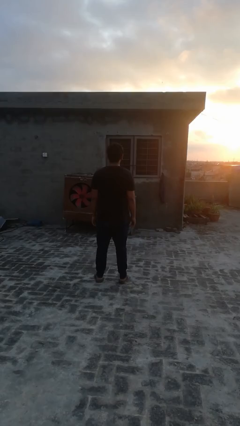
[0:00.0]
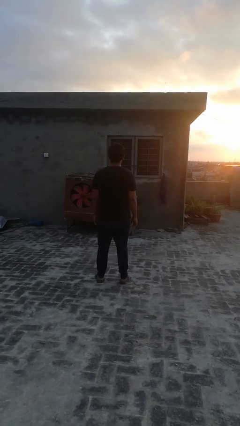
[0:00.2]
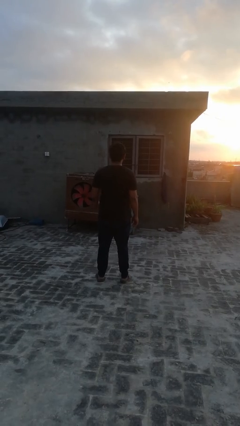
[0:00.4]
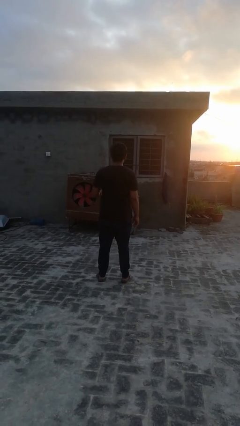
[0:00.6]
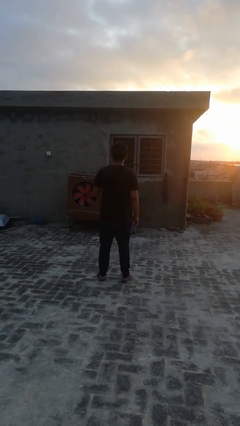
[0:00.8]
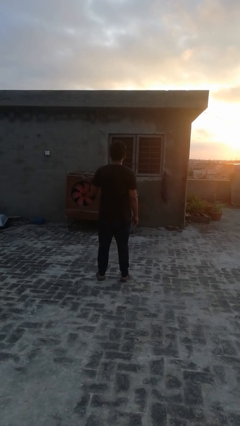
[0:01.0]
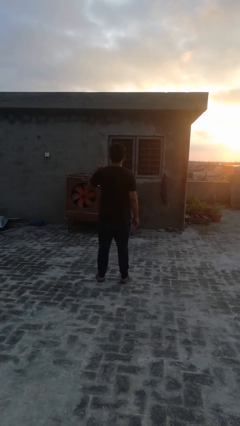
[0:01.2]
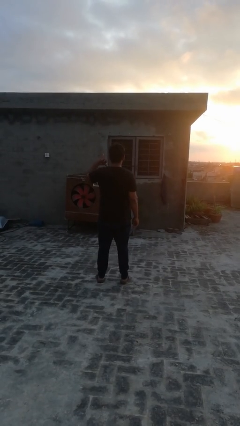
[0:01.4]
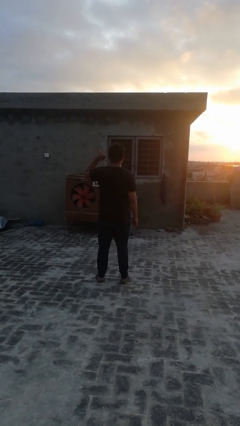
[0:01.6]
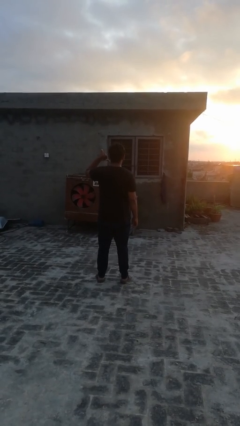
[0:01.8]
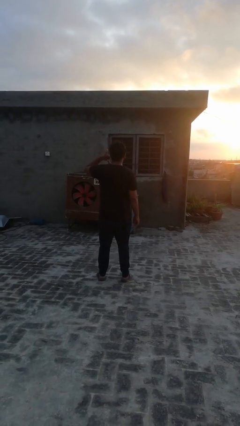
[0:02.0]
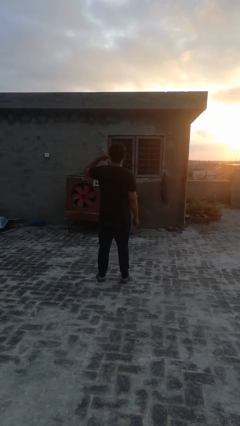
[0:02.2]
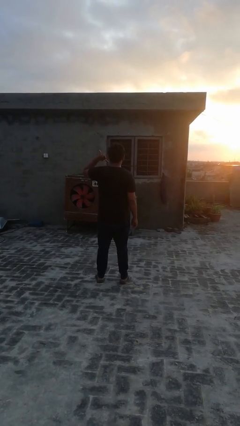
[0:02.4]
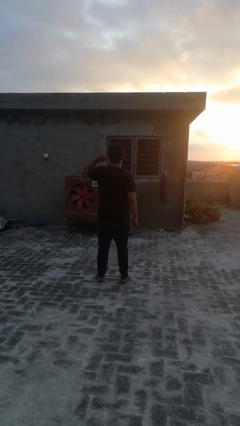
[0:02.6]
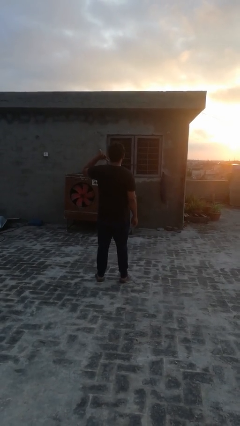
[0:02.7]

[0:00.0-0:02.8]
person gestures hang loose

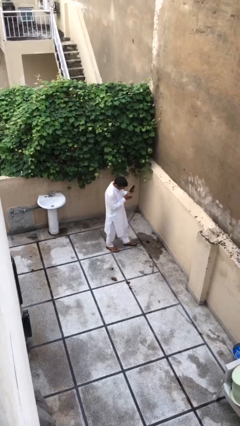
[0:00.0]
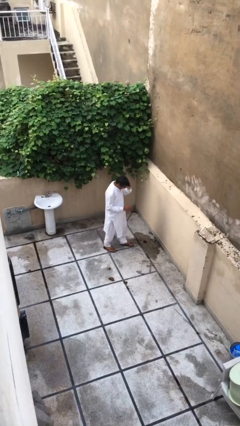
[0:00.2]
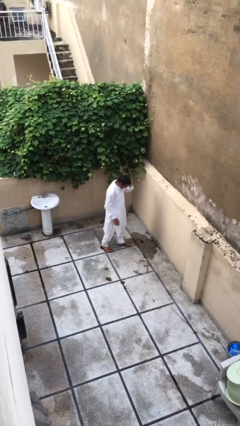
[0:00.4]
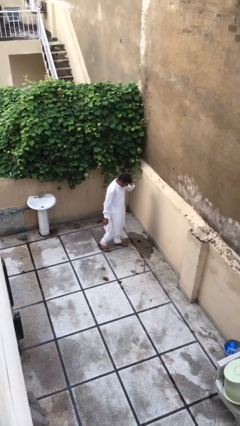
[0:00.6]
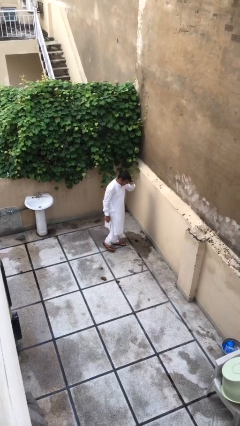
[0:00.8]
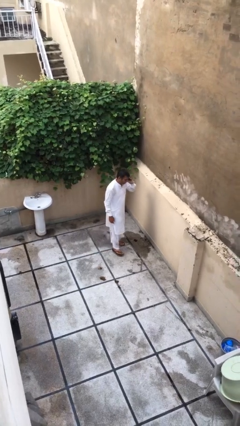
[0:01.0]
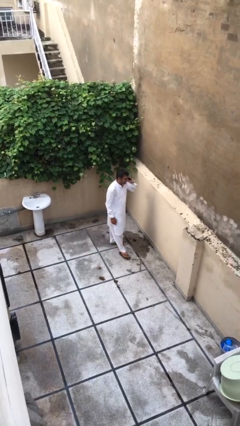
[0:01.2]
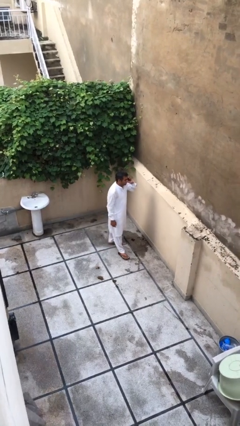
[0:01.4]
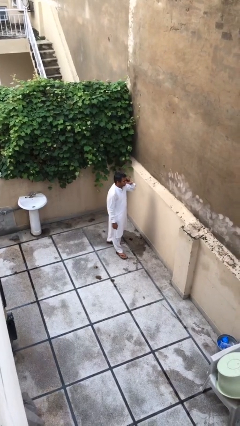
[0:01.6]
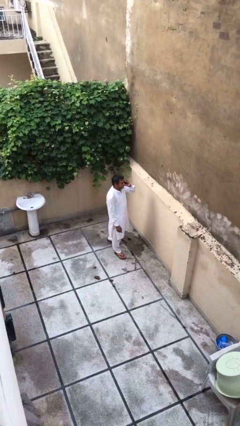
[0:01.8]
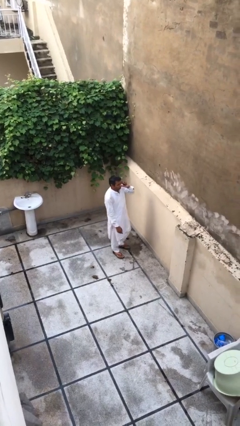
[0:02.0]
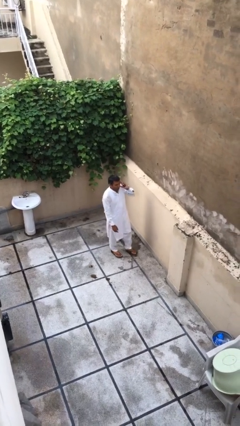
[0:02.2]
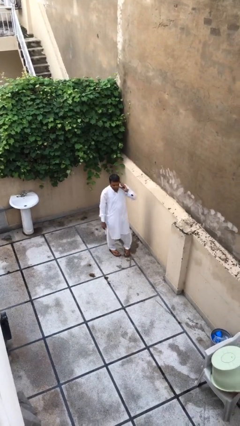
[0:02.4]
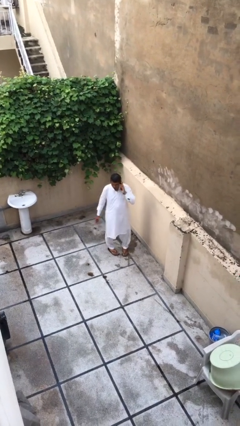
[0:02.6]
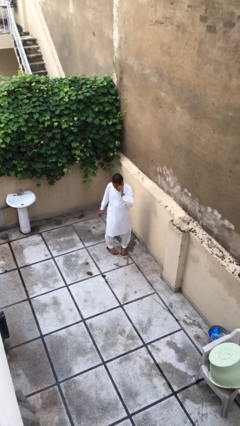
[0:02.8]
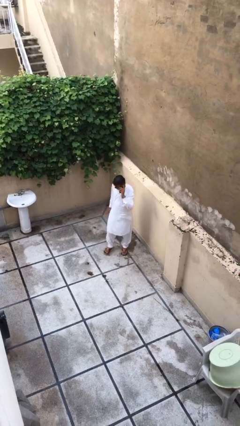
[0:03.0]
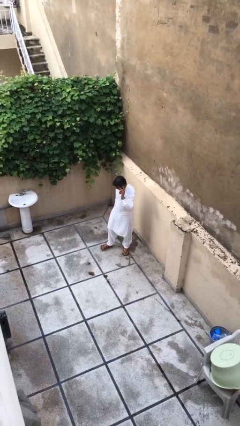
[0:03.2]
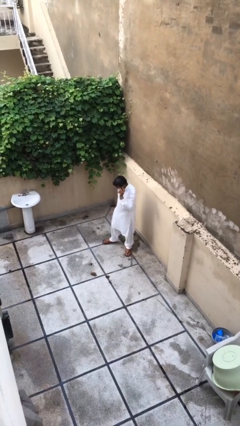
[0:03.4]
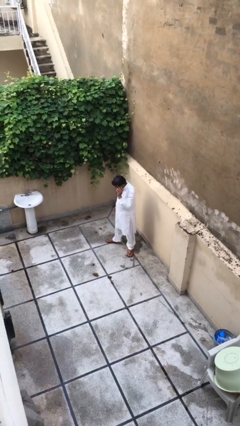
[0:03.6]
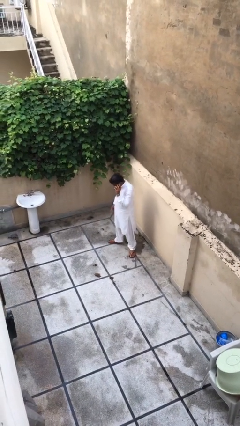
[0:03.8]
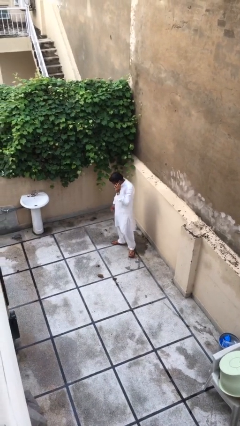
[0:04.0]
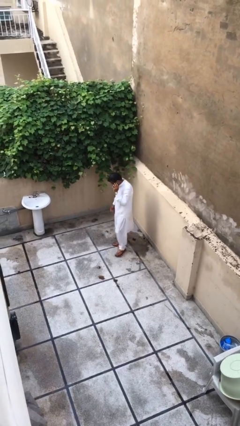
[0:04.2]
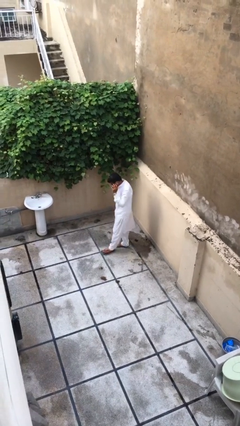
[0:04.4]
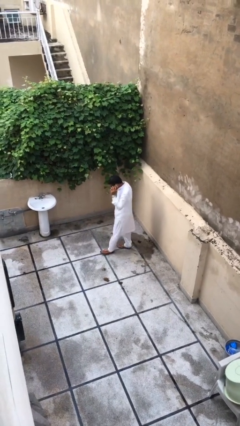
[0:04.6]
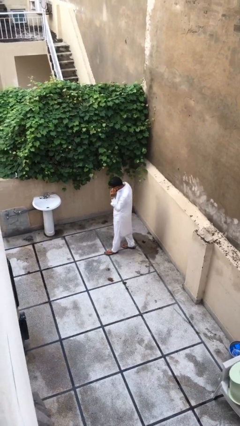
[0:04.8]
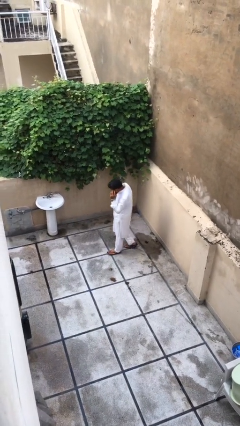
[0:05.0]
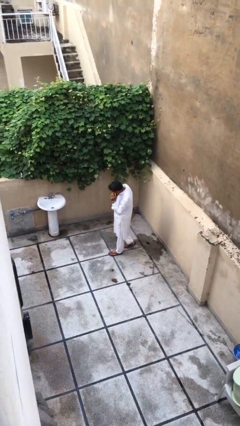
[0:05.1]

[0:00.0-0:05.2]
person talks on phone

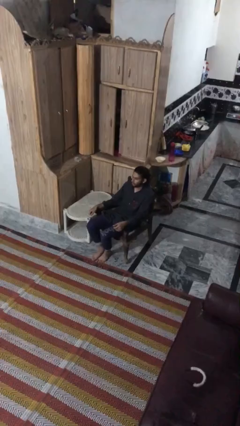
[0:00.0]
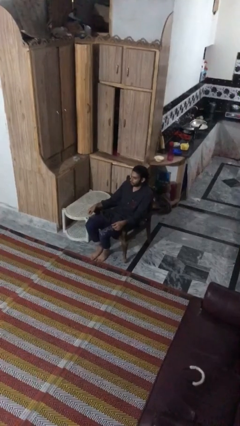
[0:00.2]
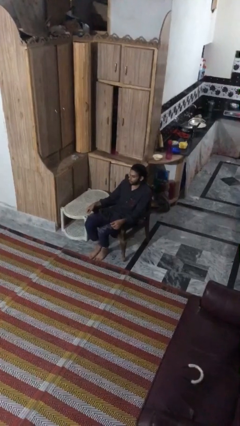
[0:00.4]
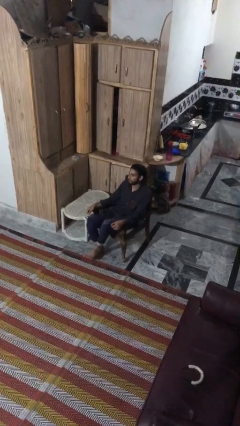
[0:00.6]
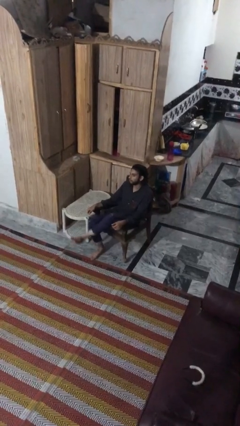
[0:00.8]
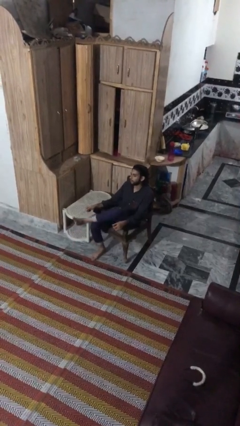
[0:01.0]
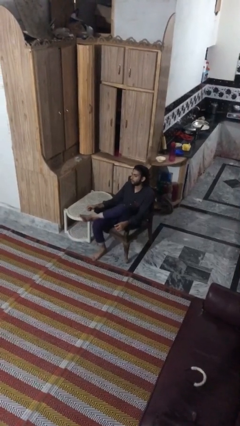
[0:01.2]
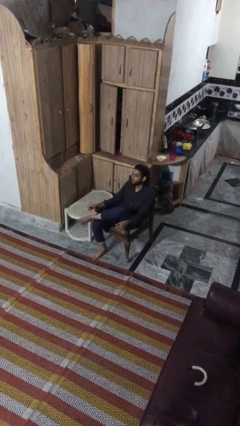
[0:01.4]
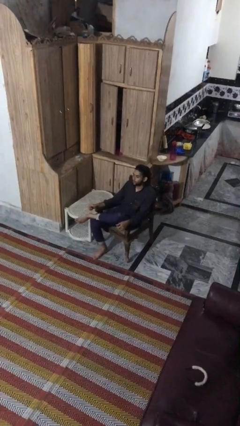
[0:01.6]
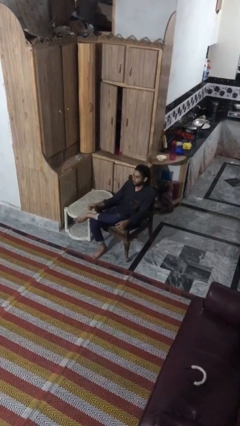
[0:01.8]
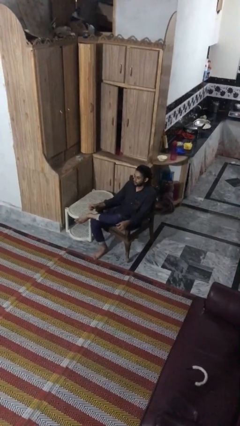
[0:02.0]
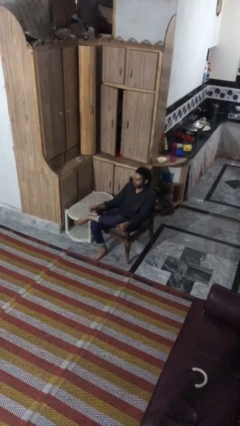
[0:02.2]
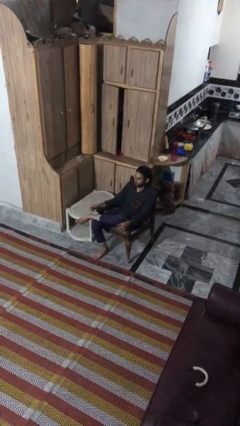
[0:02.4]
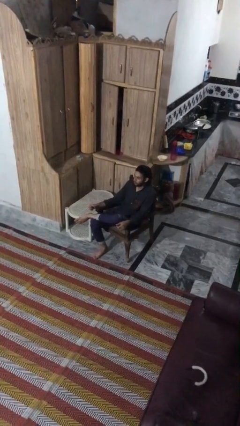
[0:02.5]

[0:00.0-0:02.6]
person crosses legs

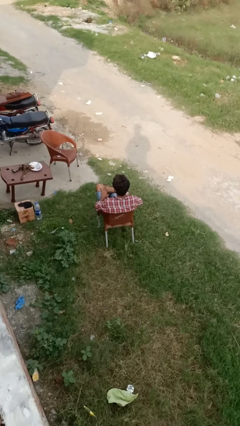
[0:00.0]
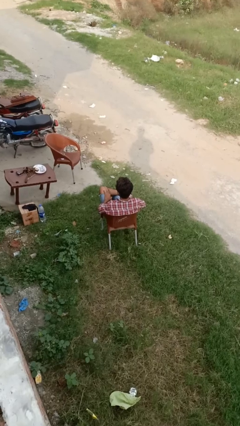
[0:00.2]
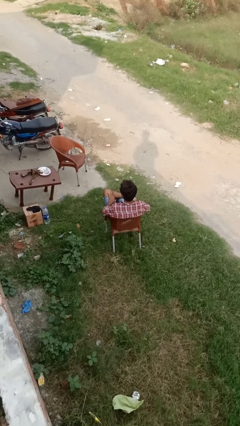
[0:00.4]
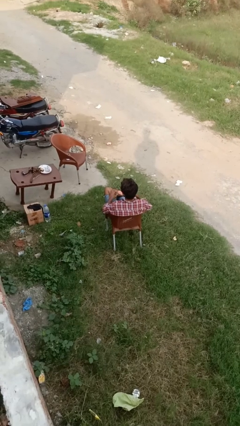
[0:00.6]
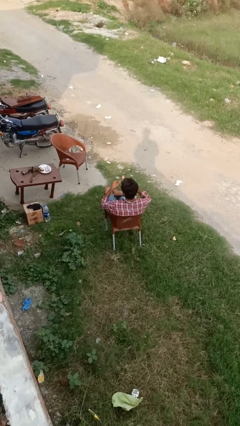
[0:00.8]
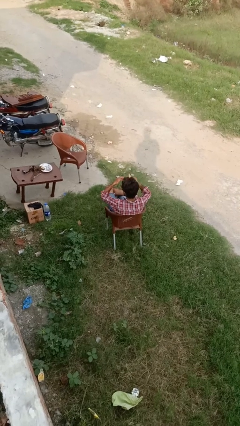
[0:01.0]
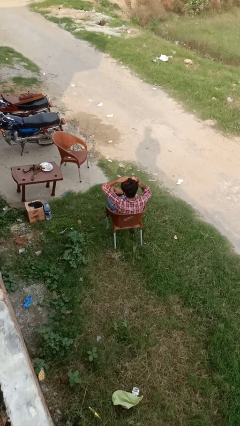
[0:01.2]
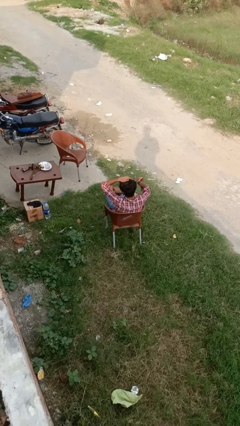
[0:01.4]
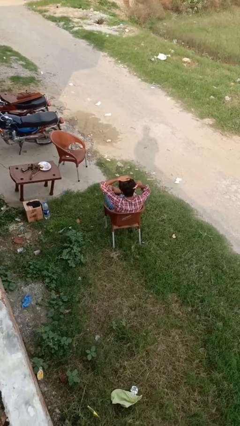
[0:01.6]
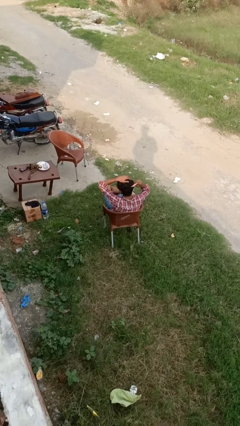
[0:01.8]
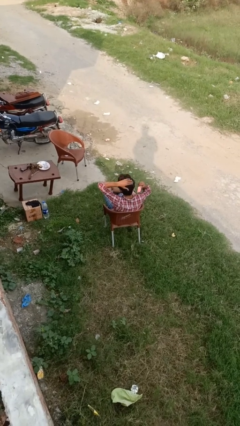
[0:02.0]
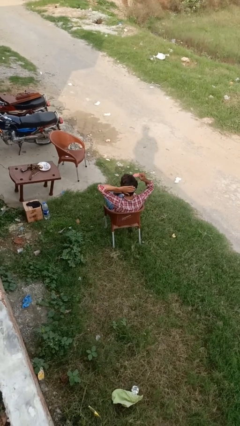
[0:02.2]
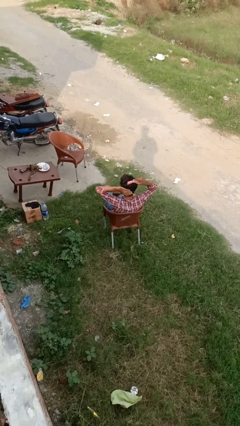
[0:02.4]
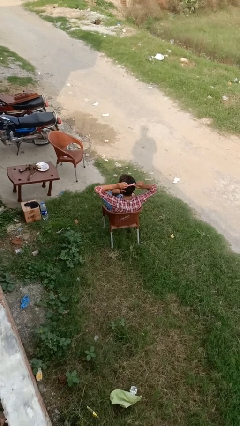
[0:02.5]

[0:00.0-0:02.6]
person brushes hair

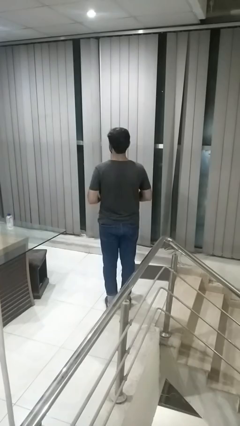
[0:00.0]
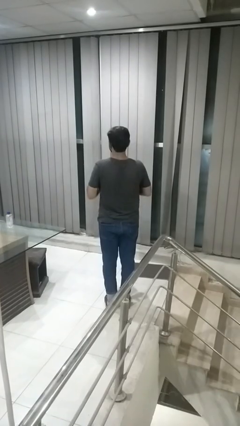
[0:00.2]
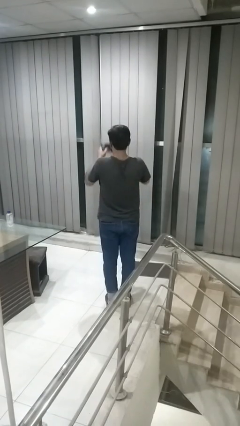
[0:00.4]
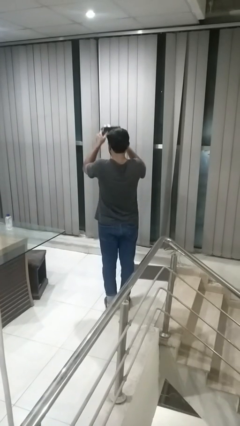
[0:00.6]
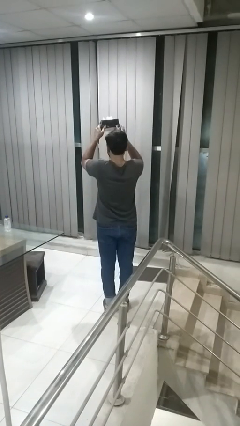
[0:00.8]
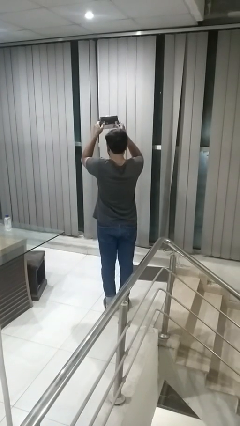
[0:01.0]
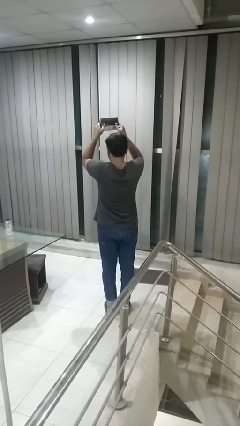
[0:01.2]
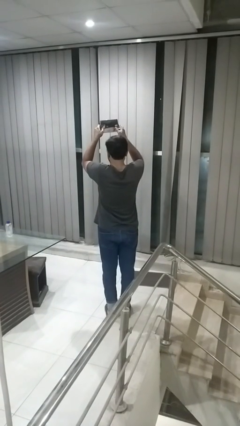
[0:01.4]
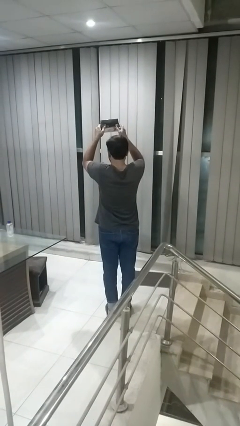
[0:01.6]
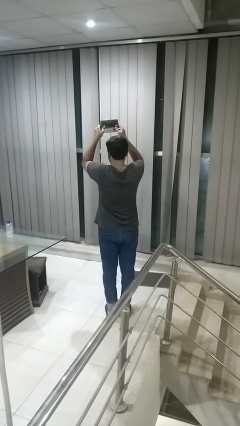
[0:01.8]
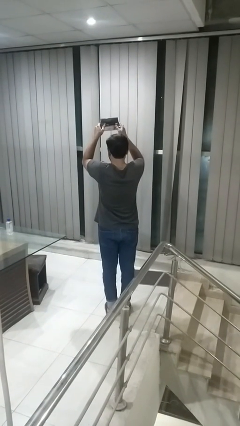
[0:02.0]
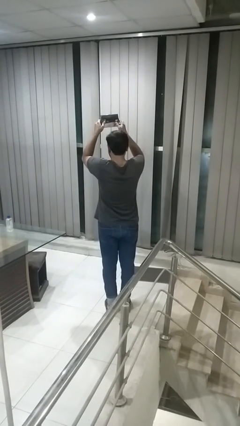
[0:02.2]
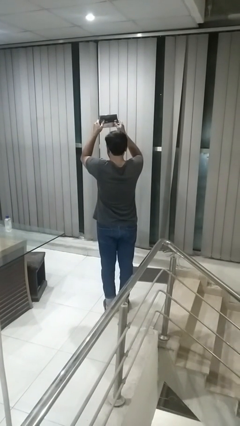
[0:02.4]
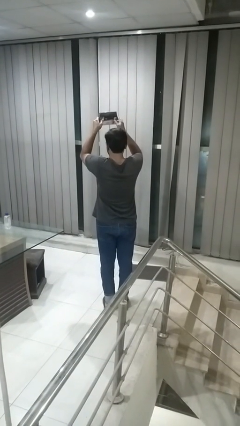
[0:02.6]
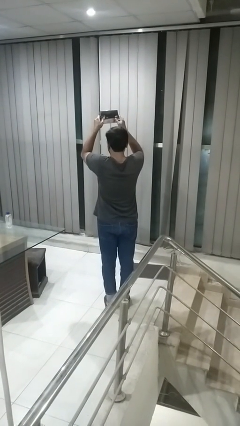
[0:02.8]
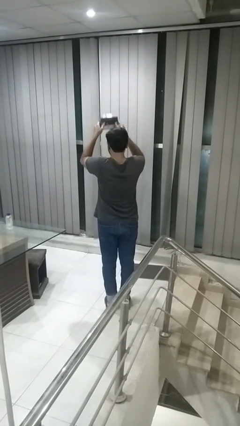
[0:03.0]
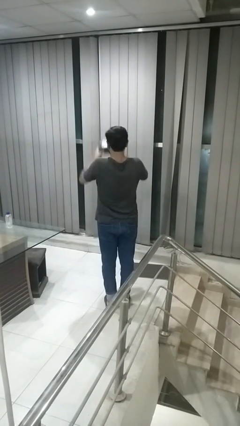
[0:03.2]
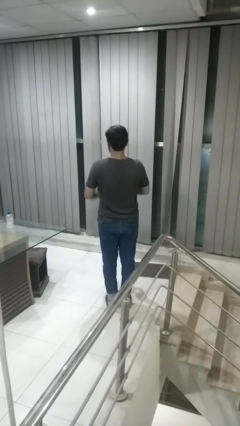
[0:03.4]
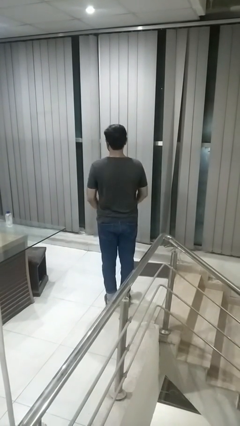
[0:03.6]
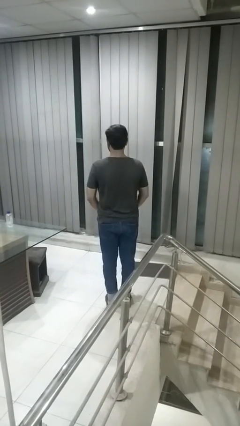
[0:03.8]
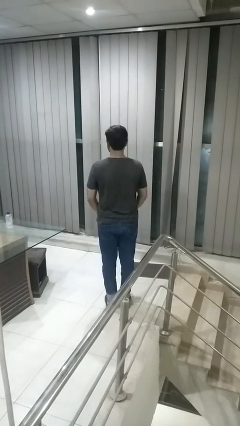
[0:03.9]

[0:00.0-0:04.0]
person holds object above head
